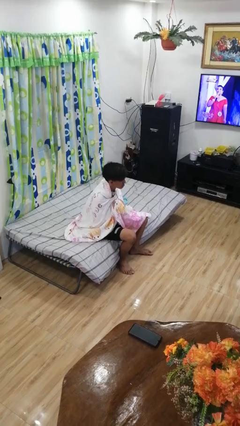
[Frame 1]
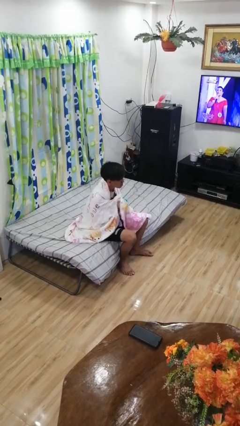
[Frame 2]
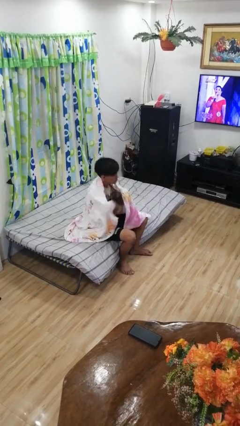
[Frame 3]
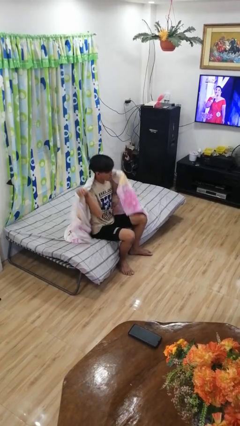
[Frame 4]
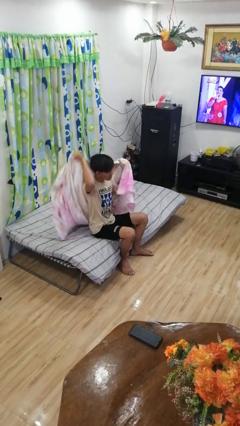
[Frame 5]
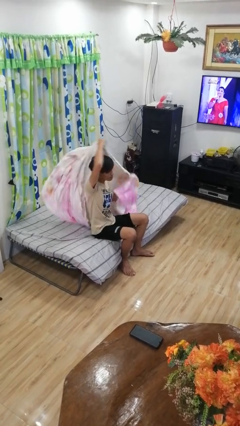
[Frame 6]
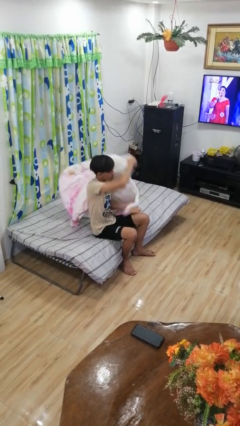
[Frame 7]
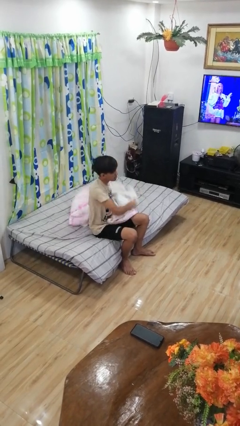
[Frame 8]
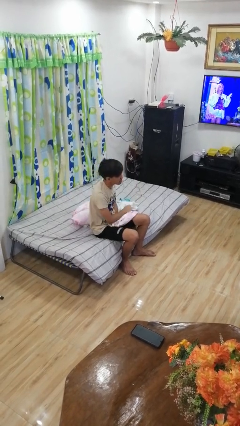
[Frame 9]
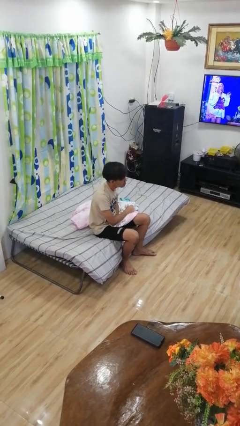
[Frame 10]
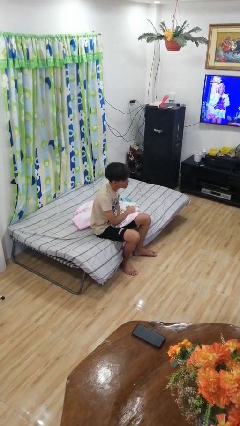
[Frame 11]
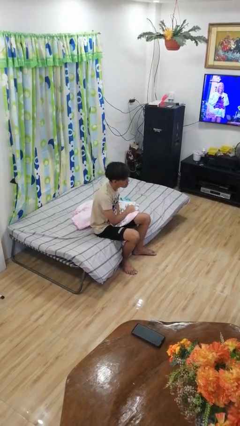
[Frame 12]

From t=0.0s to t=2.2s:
person uncovers with blanket

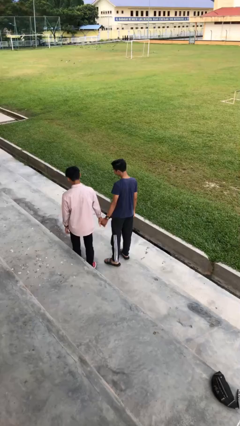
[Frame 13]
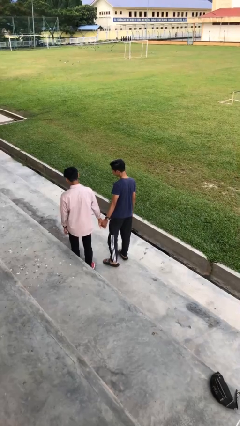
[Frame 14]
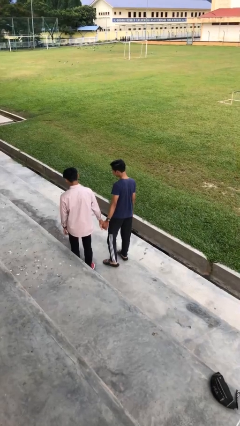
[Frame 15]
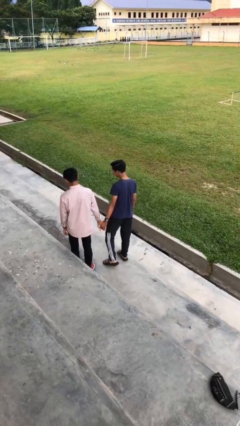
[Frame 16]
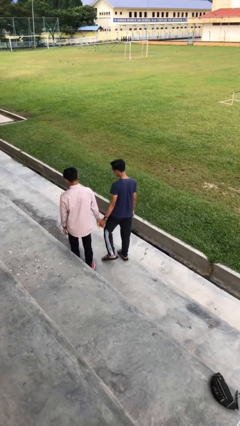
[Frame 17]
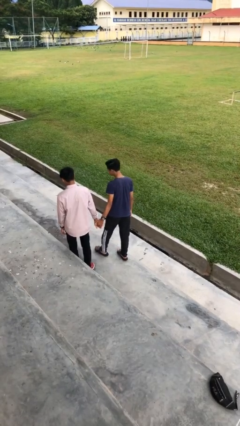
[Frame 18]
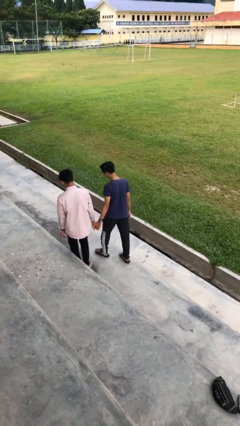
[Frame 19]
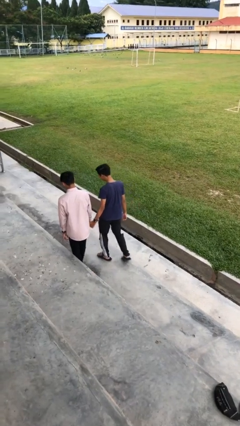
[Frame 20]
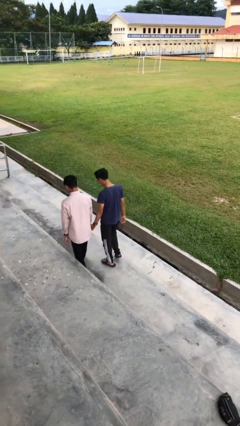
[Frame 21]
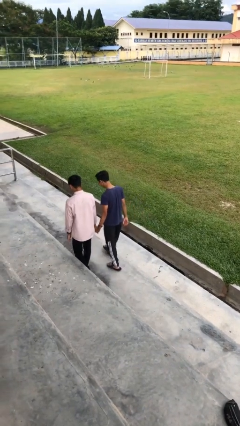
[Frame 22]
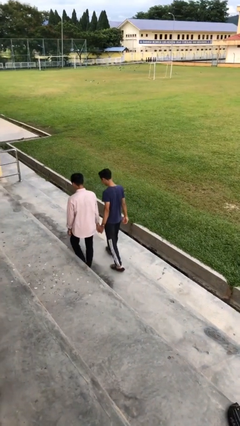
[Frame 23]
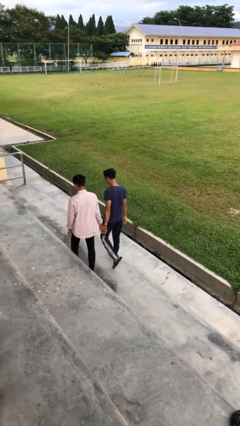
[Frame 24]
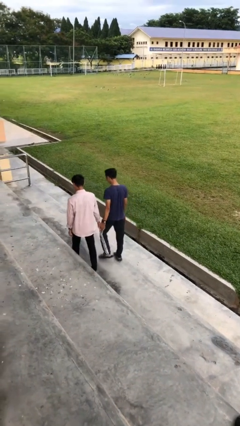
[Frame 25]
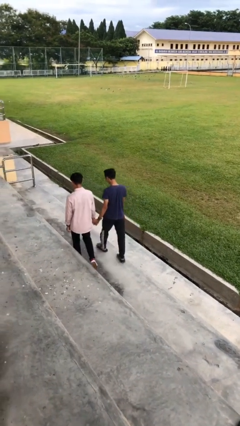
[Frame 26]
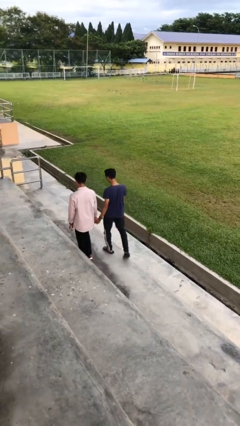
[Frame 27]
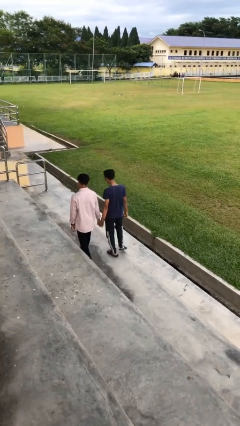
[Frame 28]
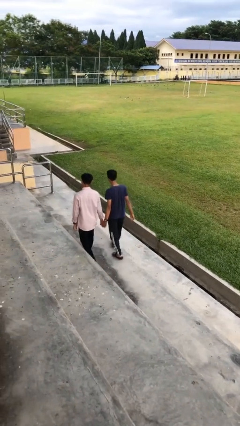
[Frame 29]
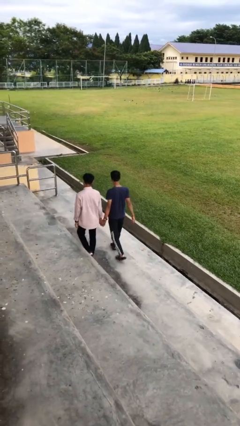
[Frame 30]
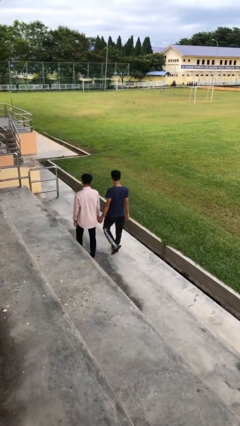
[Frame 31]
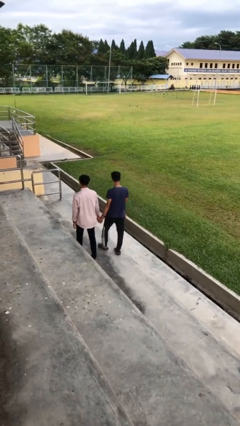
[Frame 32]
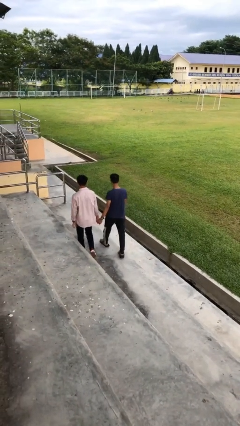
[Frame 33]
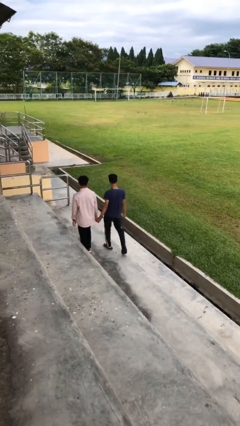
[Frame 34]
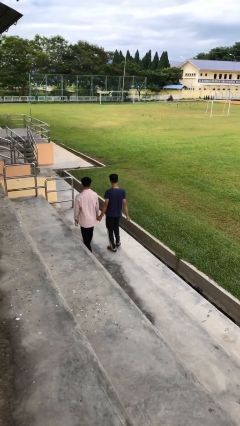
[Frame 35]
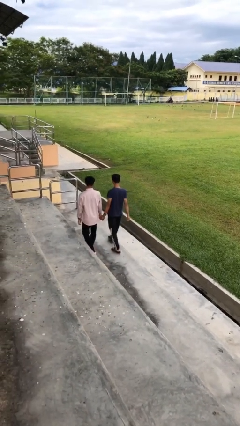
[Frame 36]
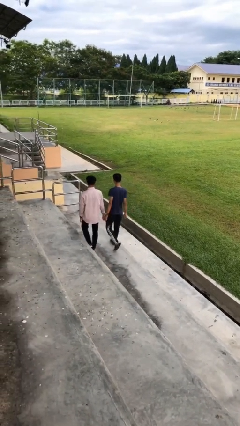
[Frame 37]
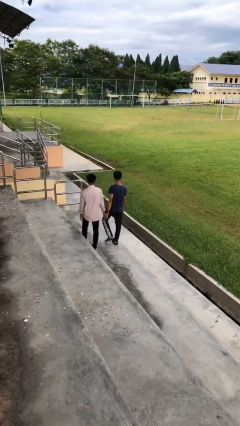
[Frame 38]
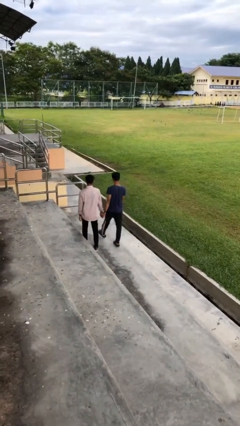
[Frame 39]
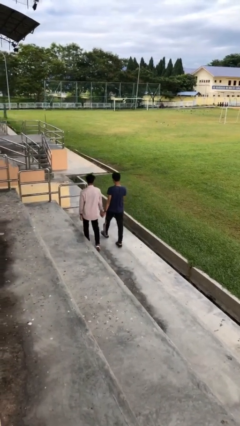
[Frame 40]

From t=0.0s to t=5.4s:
person holds hand

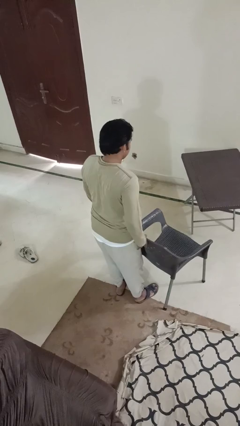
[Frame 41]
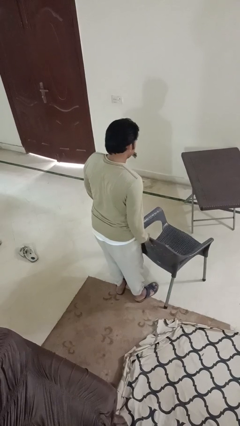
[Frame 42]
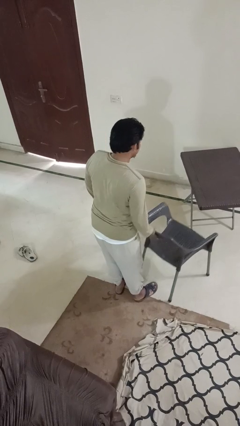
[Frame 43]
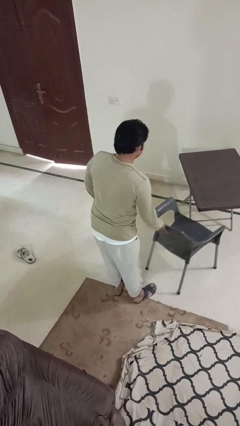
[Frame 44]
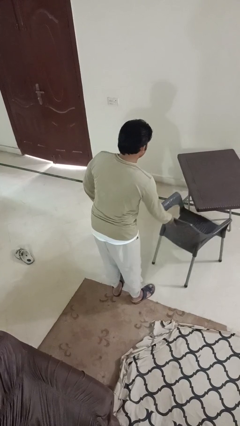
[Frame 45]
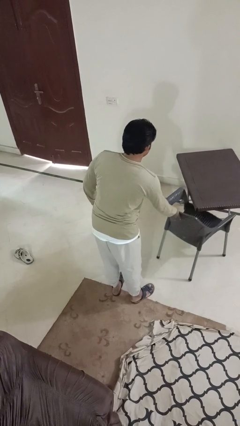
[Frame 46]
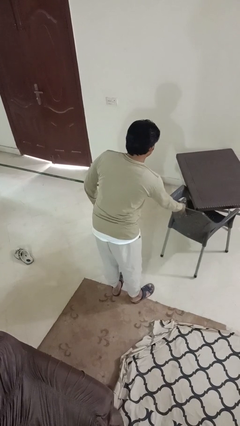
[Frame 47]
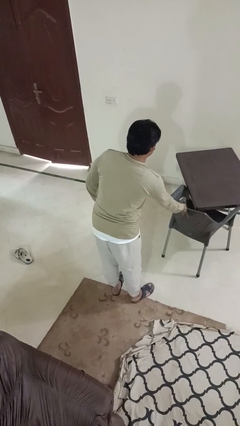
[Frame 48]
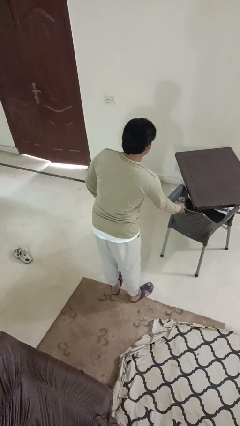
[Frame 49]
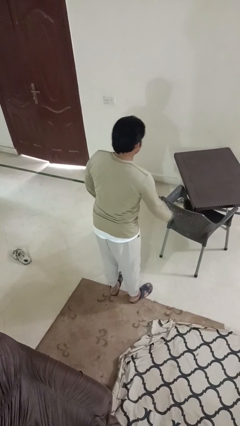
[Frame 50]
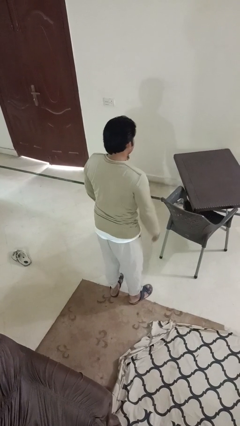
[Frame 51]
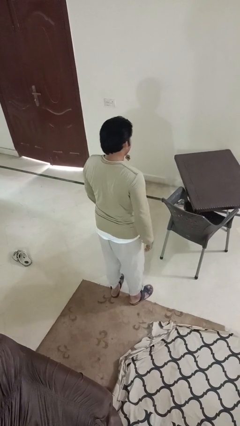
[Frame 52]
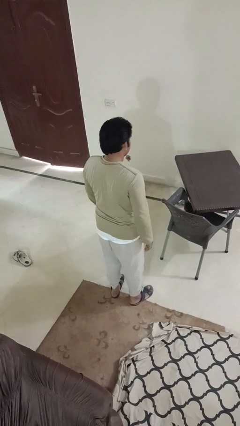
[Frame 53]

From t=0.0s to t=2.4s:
person pushes in chair

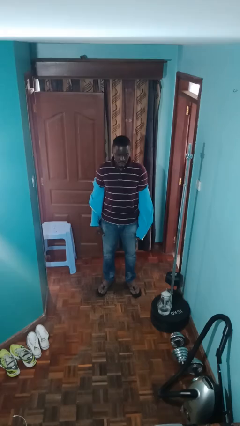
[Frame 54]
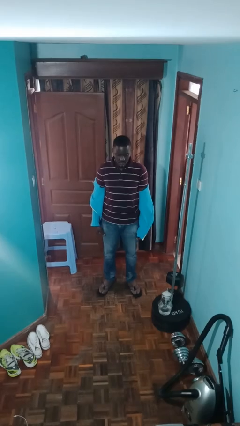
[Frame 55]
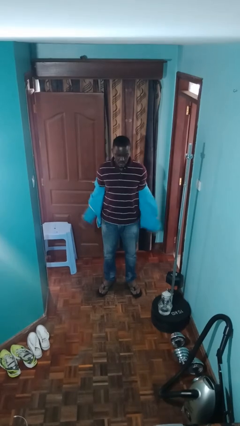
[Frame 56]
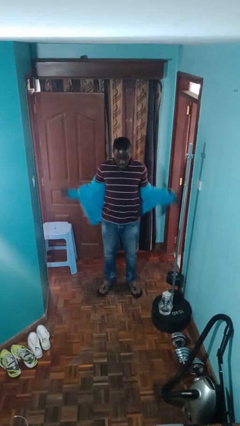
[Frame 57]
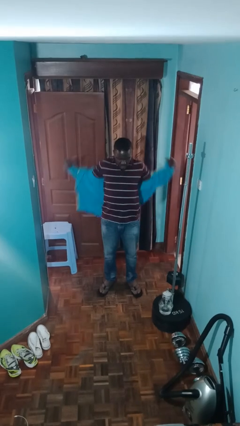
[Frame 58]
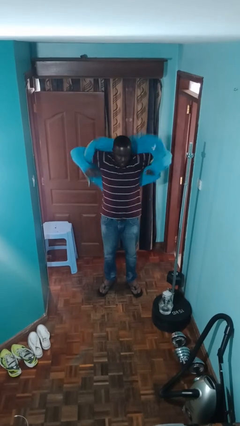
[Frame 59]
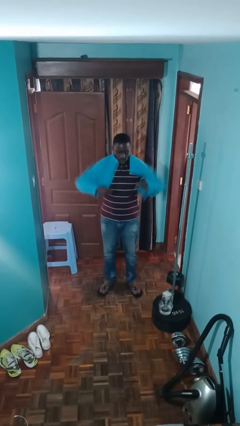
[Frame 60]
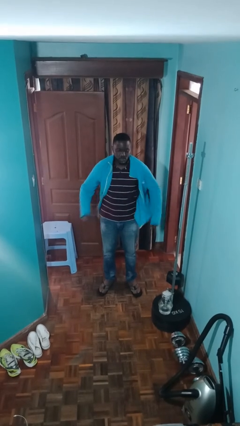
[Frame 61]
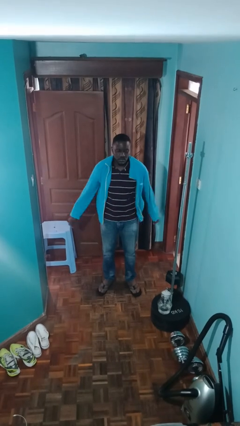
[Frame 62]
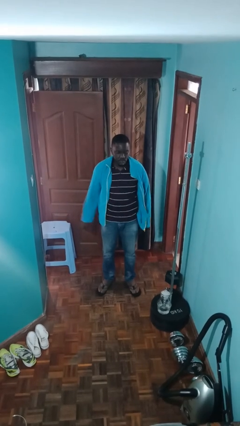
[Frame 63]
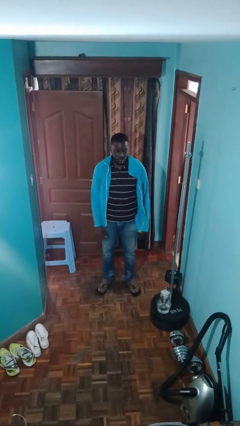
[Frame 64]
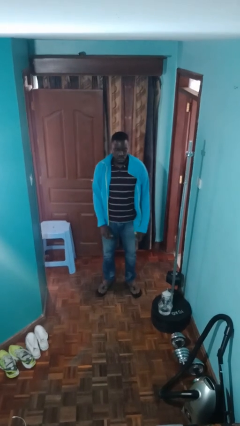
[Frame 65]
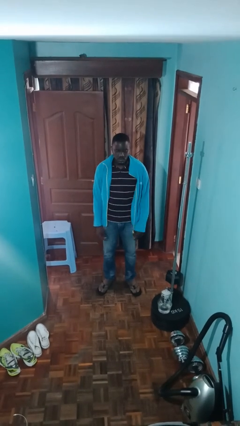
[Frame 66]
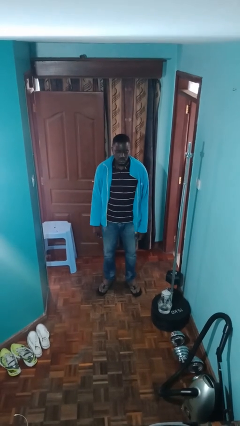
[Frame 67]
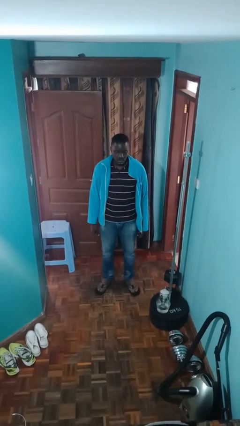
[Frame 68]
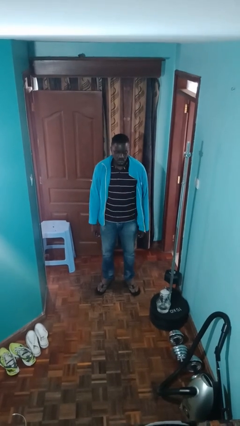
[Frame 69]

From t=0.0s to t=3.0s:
person puts on jacket

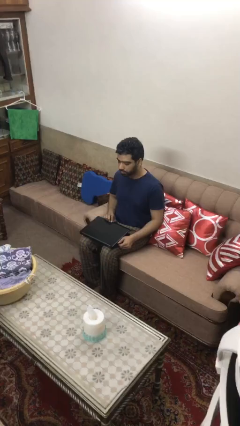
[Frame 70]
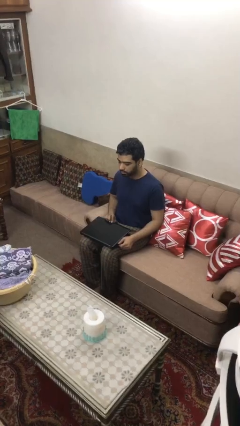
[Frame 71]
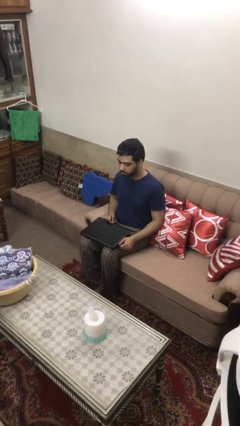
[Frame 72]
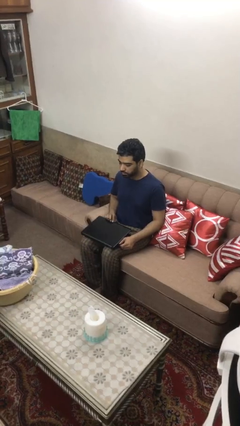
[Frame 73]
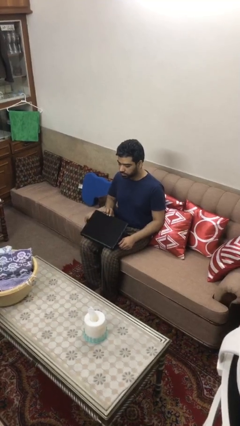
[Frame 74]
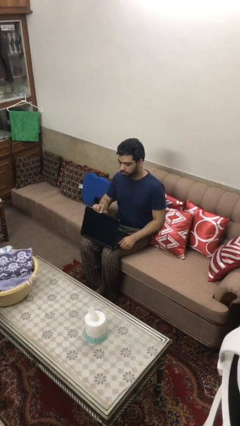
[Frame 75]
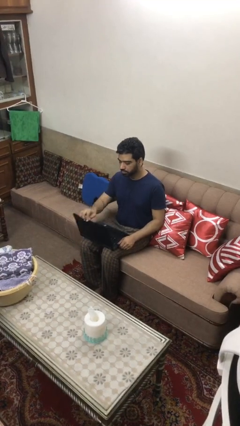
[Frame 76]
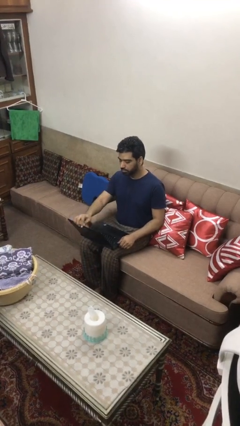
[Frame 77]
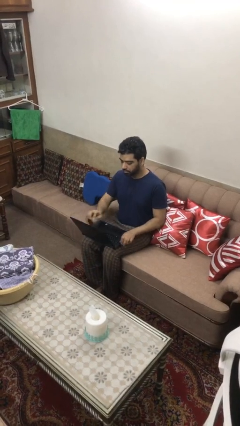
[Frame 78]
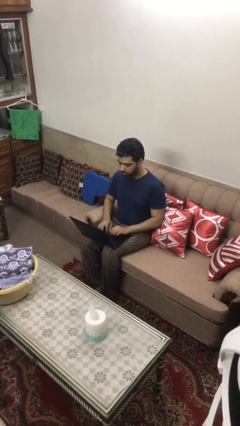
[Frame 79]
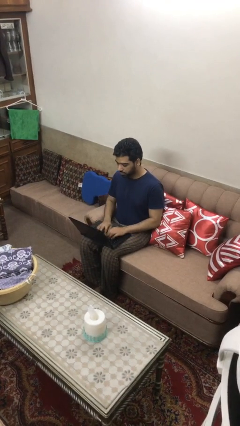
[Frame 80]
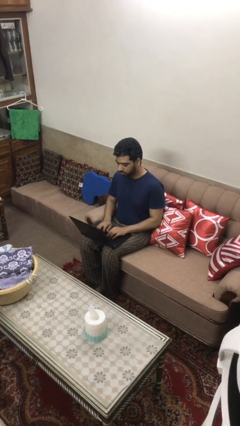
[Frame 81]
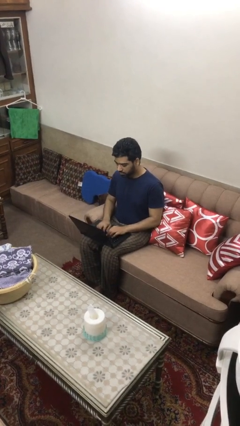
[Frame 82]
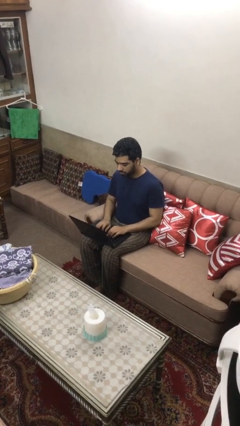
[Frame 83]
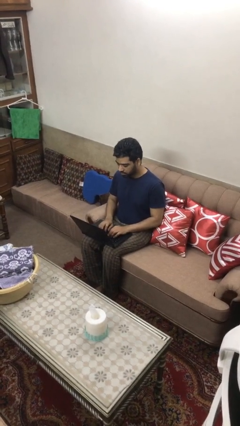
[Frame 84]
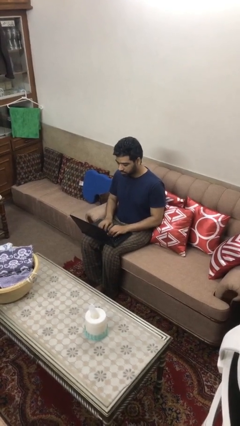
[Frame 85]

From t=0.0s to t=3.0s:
person interacts with laptop

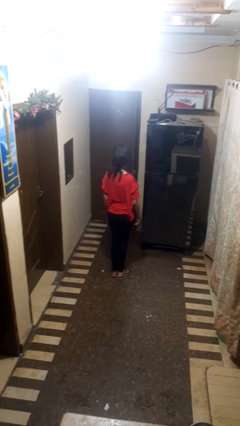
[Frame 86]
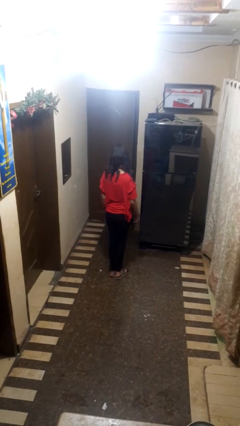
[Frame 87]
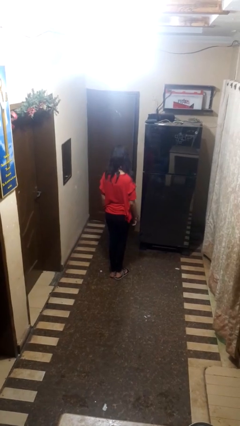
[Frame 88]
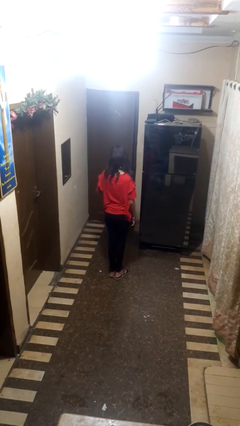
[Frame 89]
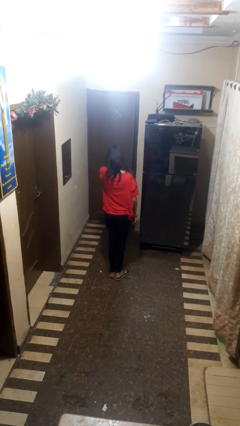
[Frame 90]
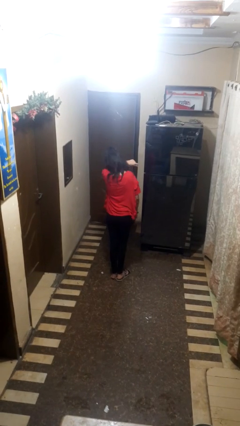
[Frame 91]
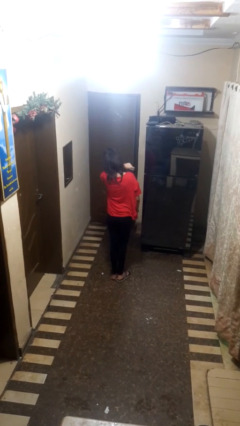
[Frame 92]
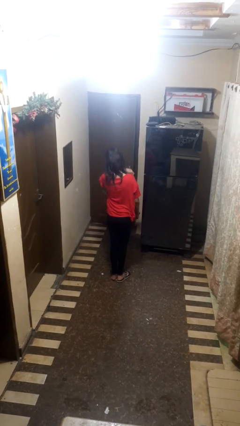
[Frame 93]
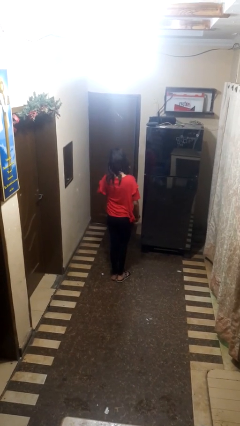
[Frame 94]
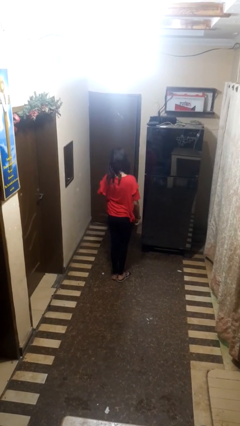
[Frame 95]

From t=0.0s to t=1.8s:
person sneezes into arm
